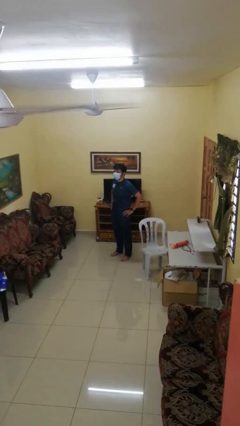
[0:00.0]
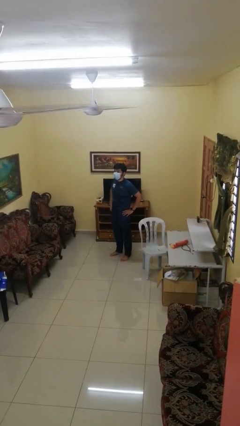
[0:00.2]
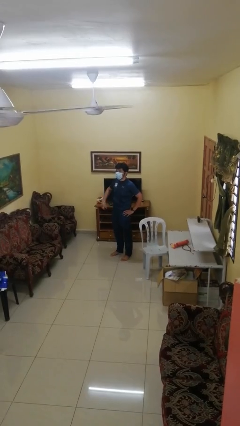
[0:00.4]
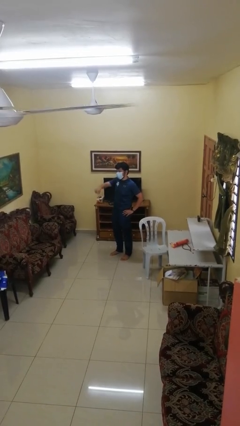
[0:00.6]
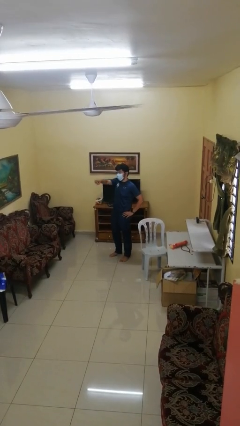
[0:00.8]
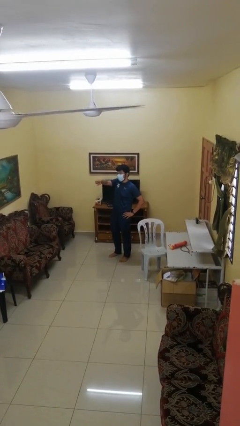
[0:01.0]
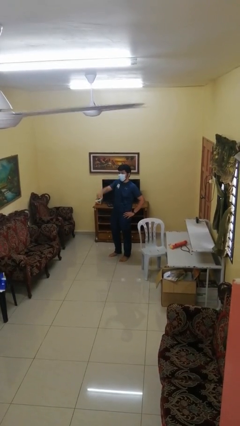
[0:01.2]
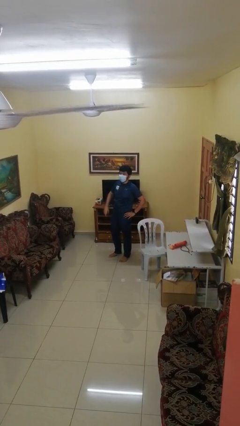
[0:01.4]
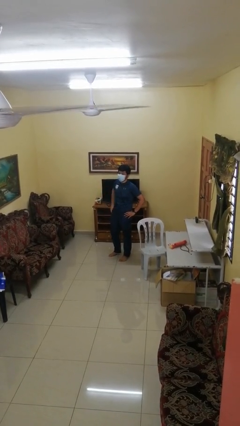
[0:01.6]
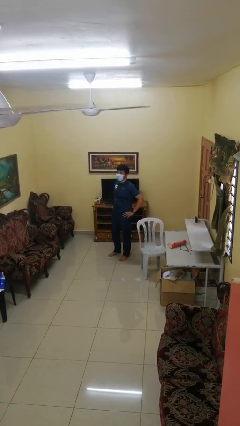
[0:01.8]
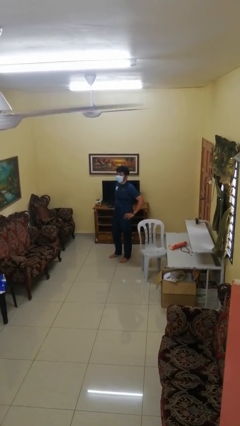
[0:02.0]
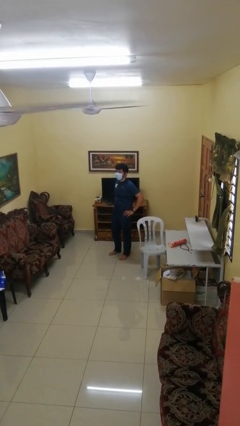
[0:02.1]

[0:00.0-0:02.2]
person points at person

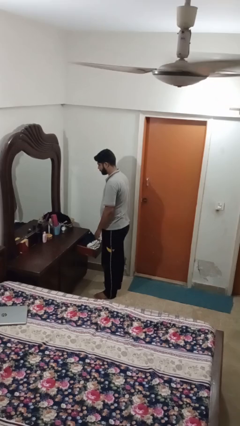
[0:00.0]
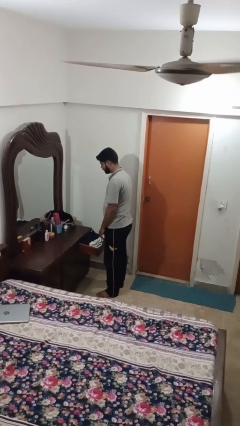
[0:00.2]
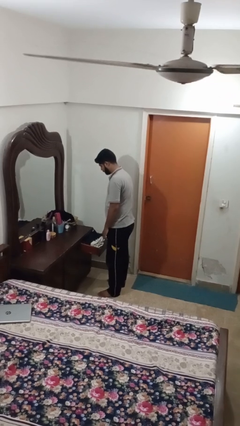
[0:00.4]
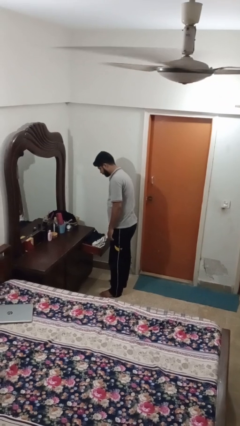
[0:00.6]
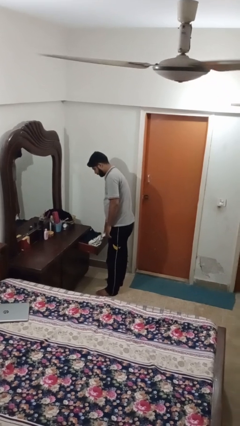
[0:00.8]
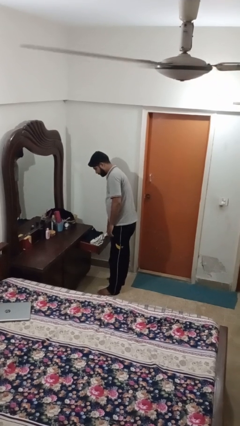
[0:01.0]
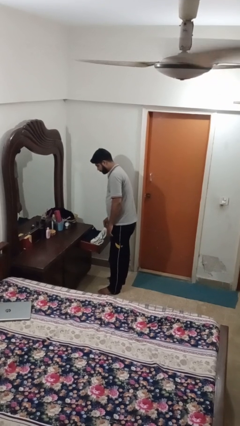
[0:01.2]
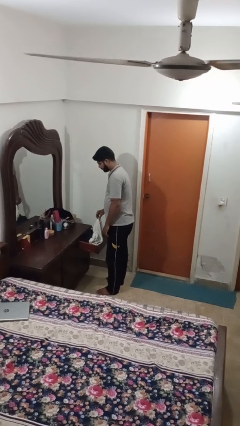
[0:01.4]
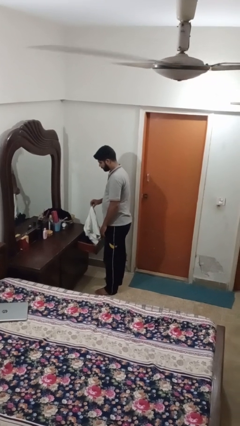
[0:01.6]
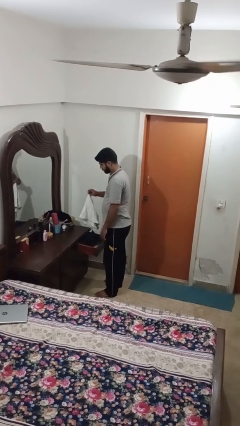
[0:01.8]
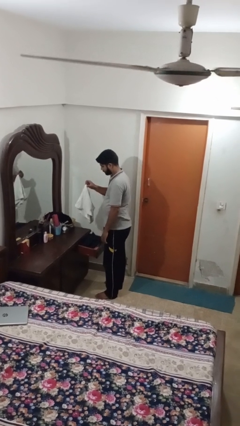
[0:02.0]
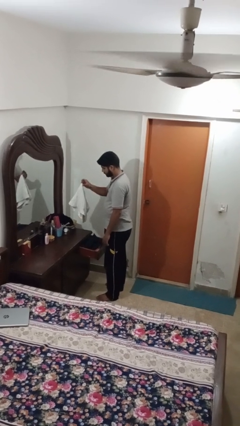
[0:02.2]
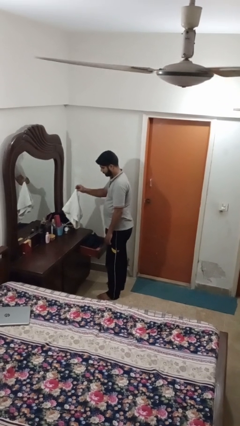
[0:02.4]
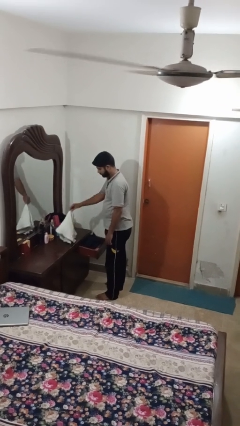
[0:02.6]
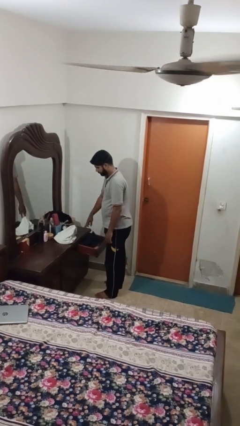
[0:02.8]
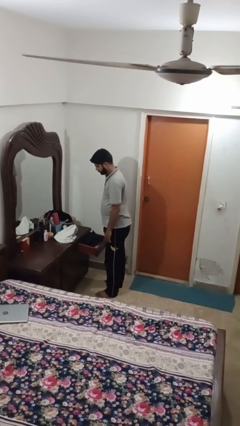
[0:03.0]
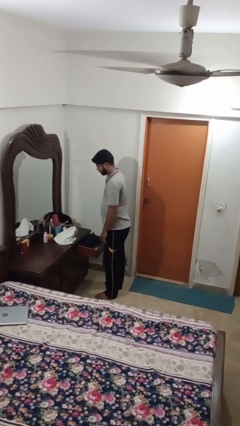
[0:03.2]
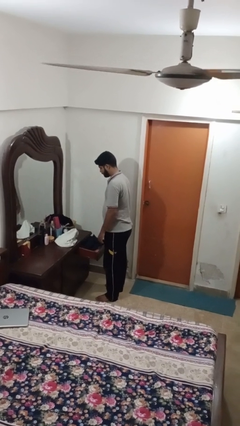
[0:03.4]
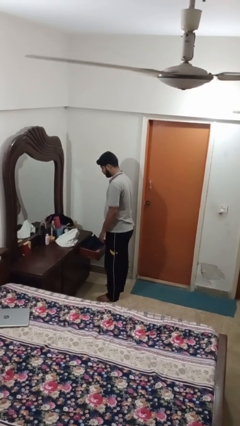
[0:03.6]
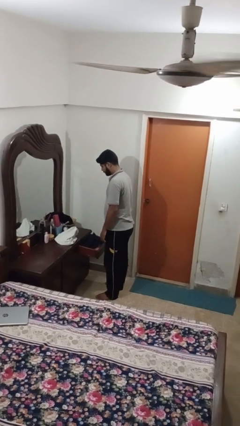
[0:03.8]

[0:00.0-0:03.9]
person takes clothes from dresser

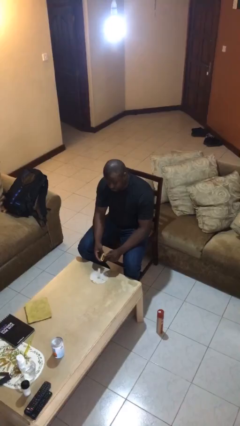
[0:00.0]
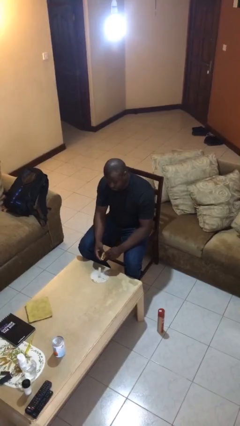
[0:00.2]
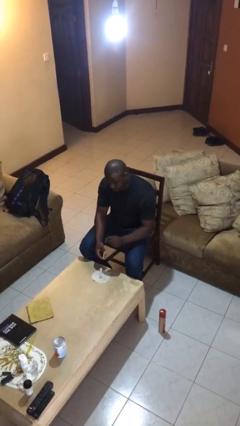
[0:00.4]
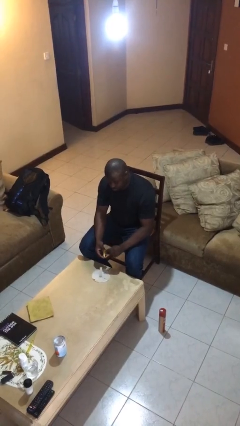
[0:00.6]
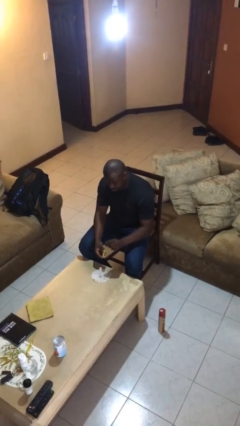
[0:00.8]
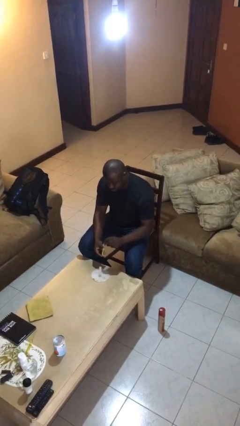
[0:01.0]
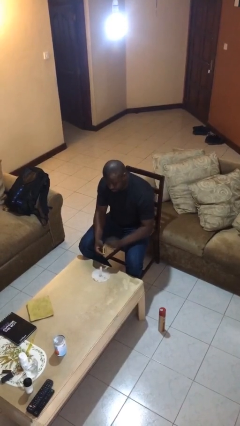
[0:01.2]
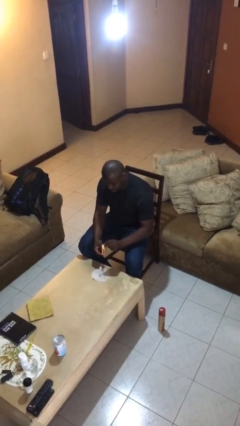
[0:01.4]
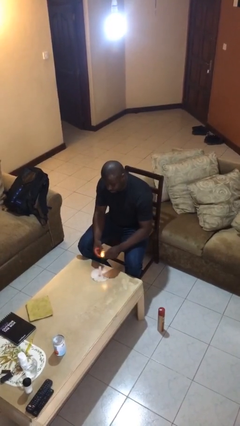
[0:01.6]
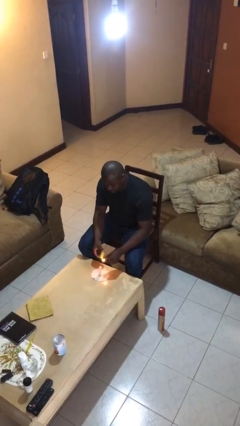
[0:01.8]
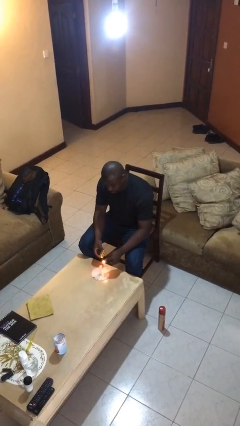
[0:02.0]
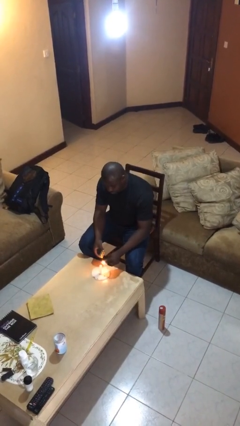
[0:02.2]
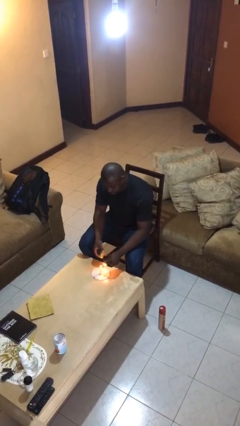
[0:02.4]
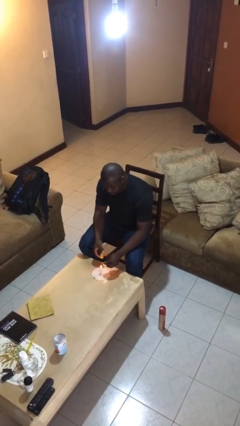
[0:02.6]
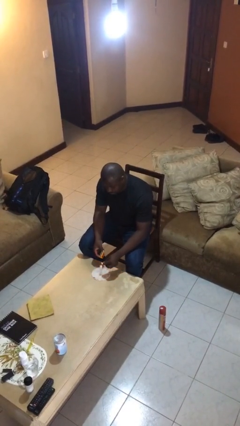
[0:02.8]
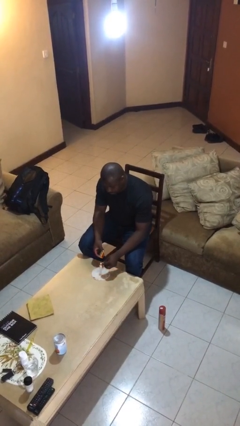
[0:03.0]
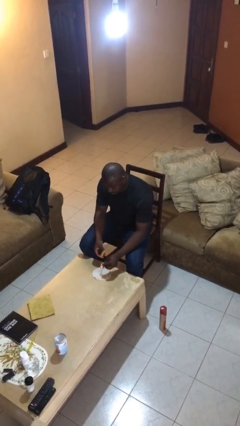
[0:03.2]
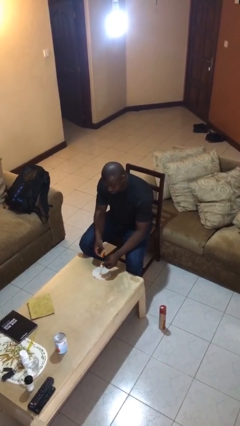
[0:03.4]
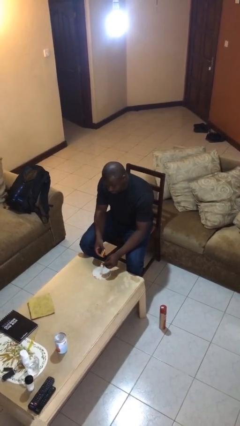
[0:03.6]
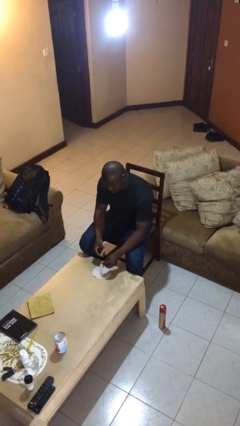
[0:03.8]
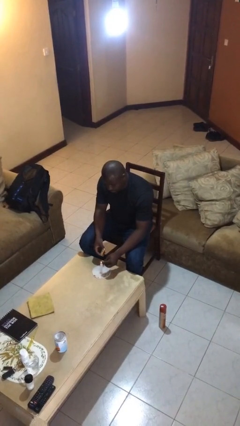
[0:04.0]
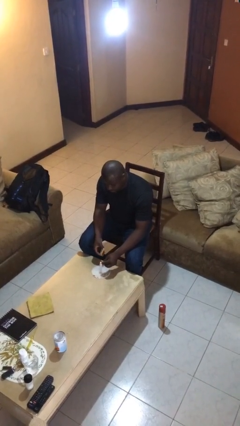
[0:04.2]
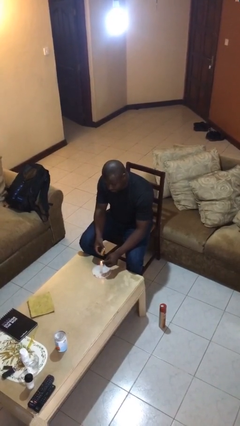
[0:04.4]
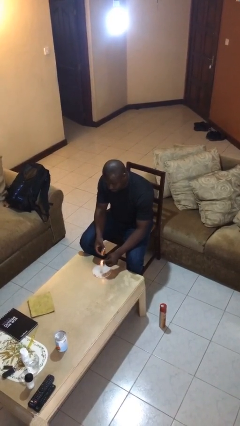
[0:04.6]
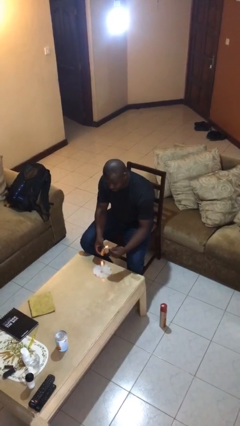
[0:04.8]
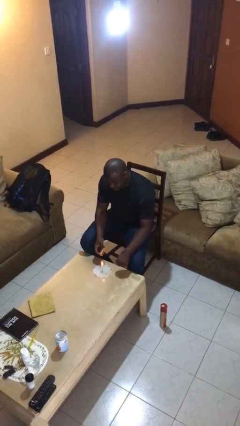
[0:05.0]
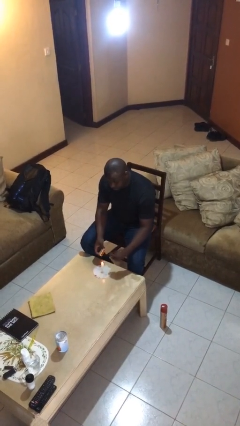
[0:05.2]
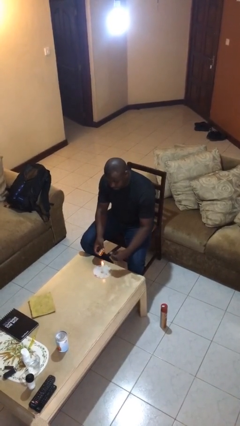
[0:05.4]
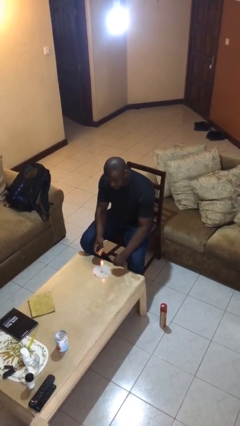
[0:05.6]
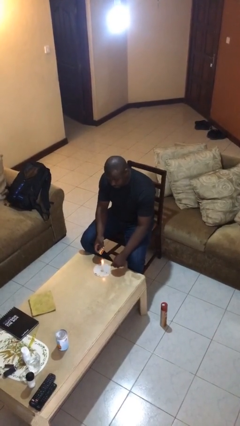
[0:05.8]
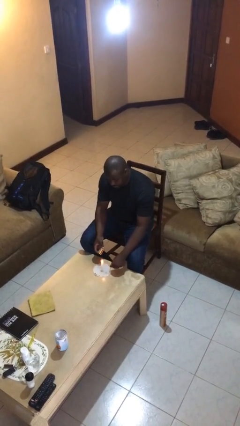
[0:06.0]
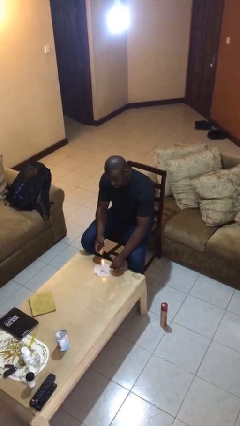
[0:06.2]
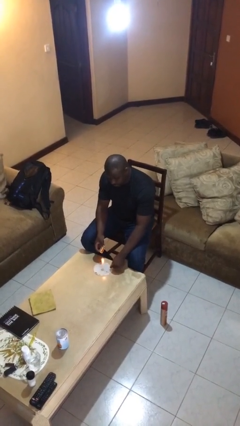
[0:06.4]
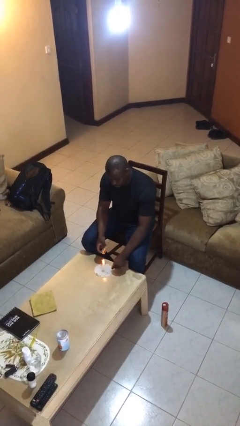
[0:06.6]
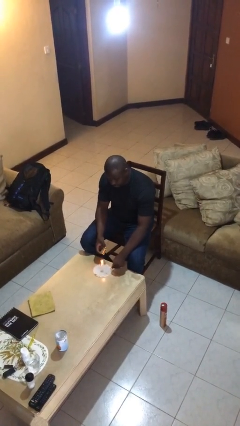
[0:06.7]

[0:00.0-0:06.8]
person lights candle

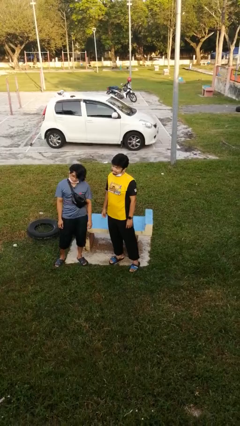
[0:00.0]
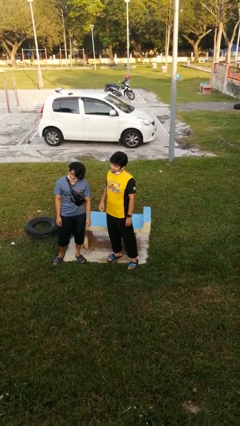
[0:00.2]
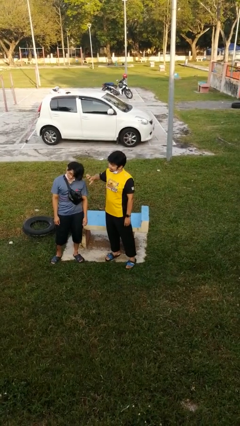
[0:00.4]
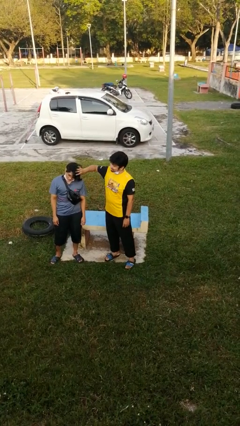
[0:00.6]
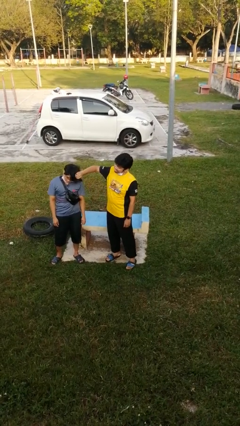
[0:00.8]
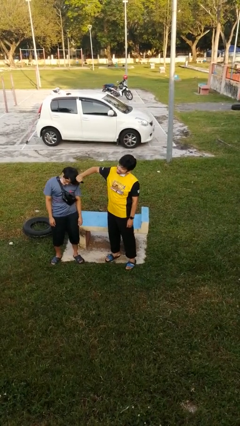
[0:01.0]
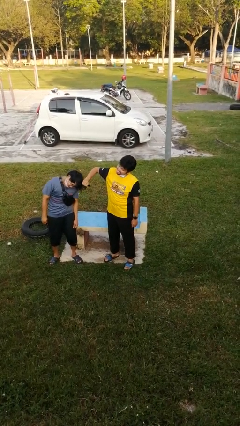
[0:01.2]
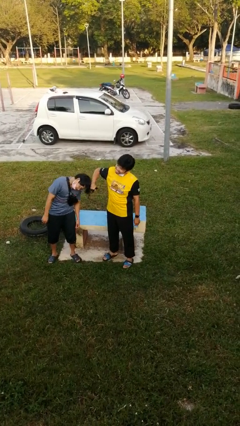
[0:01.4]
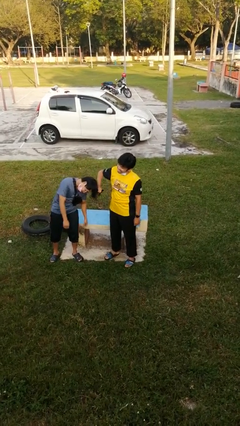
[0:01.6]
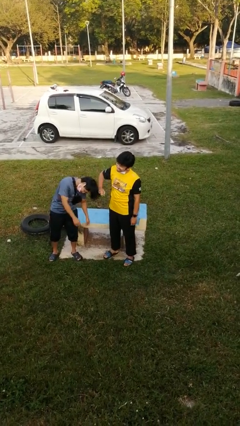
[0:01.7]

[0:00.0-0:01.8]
person grabs person by hair

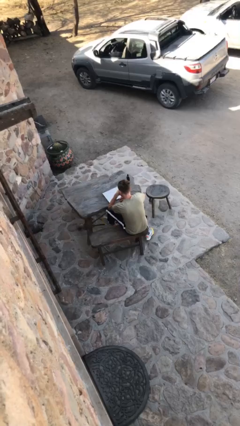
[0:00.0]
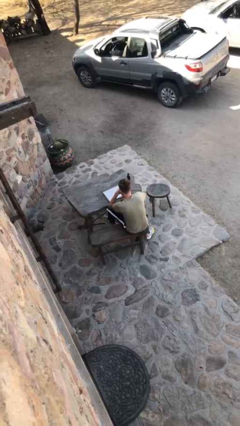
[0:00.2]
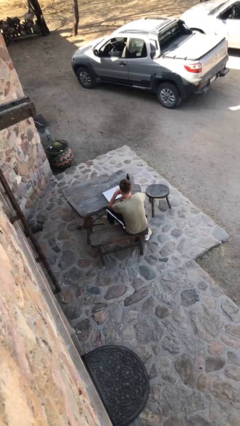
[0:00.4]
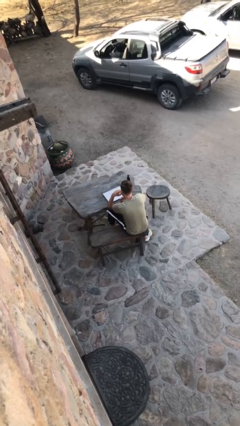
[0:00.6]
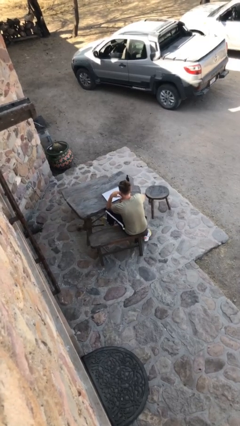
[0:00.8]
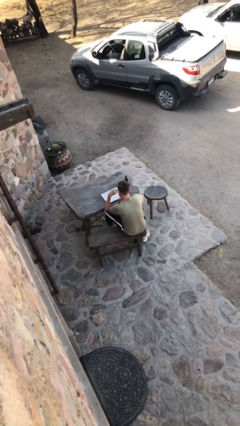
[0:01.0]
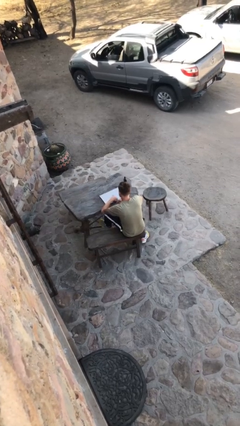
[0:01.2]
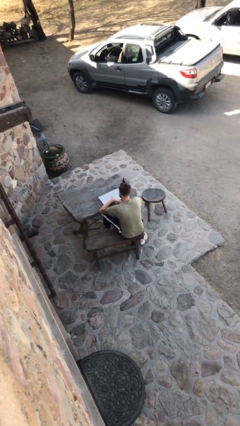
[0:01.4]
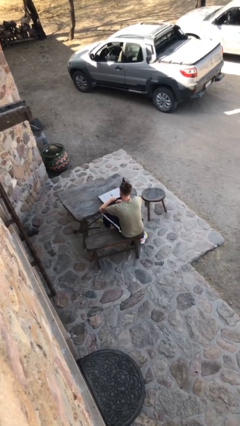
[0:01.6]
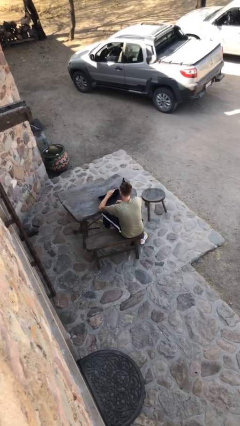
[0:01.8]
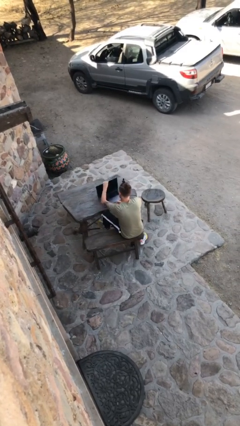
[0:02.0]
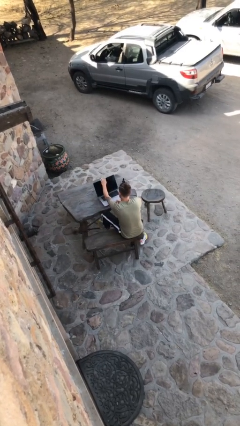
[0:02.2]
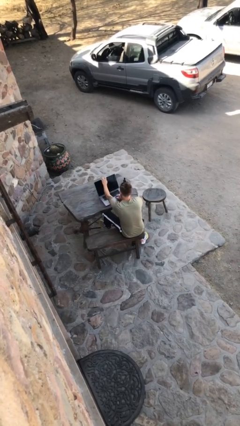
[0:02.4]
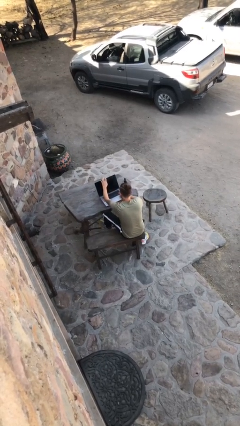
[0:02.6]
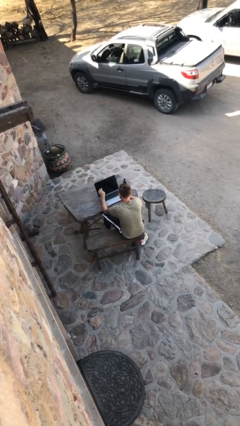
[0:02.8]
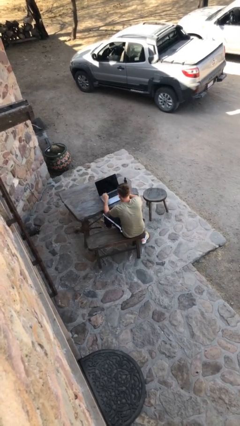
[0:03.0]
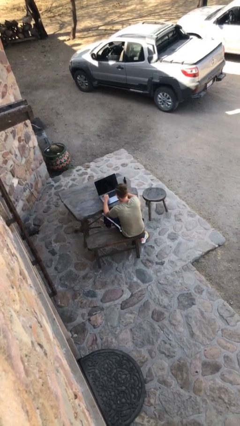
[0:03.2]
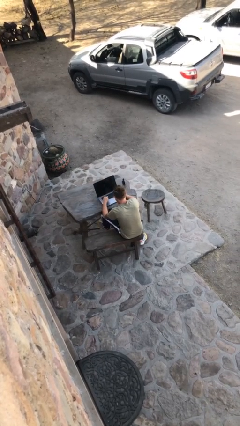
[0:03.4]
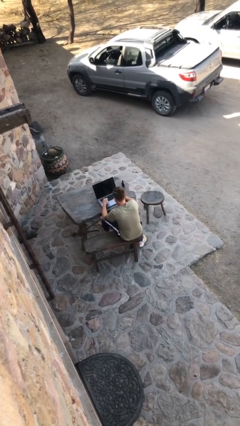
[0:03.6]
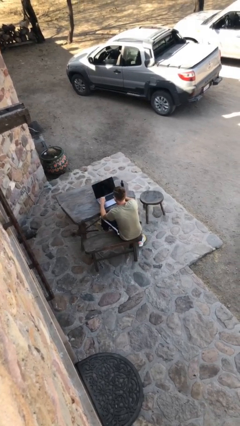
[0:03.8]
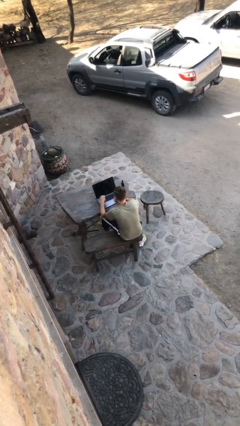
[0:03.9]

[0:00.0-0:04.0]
person interacts with laptop
